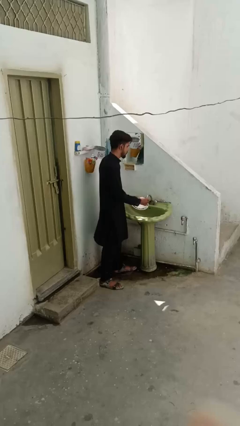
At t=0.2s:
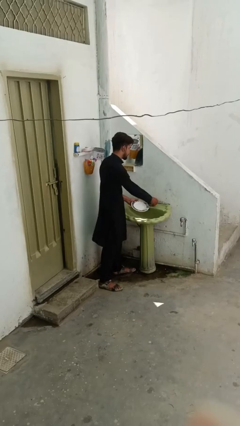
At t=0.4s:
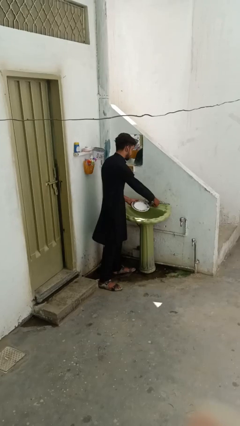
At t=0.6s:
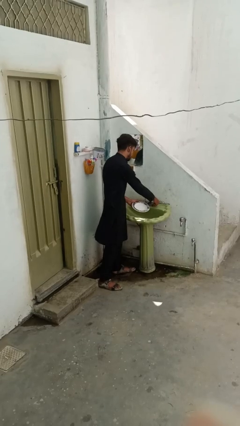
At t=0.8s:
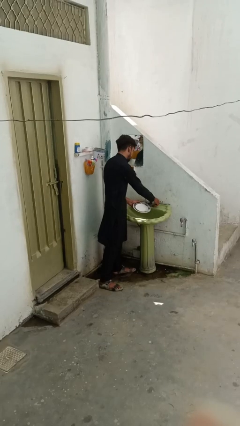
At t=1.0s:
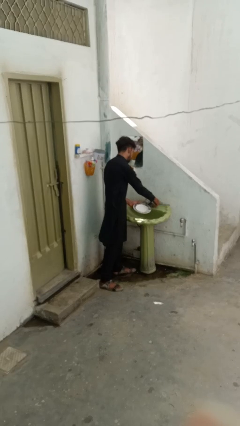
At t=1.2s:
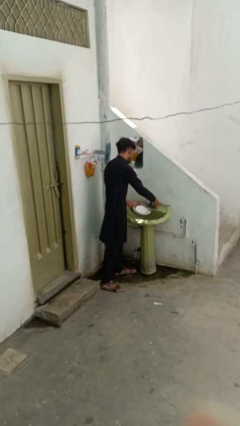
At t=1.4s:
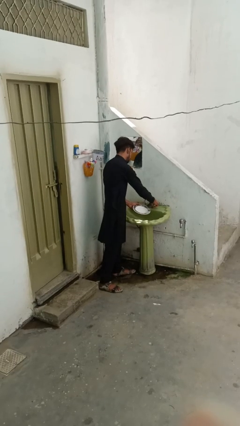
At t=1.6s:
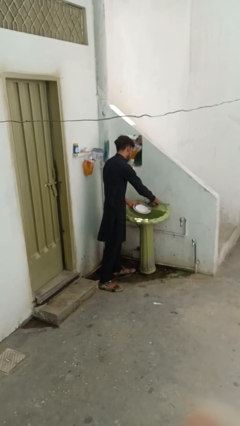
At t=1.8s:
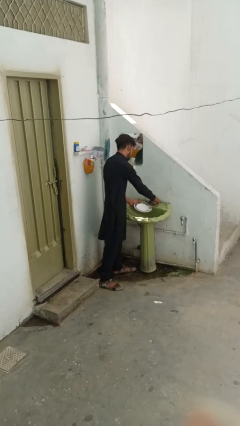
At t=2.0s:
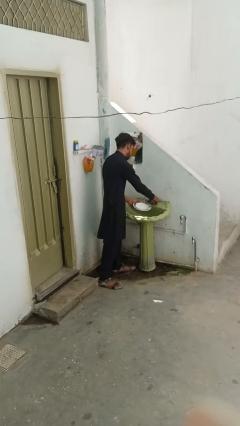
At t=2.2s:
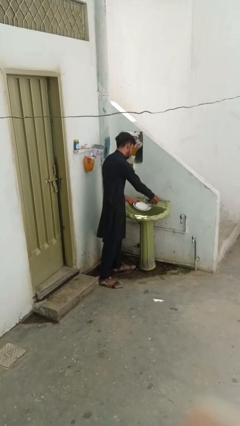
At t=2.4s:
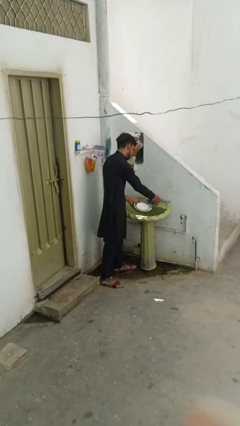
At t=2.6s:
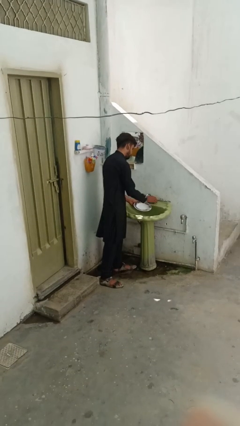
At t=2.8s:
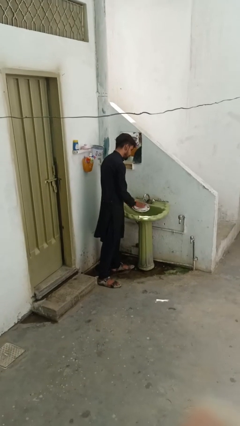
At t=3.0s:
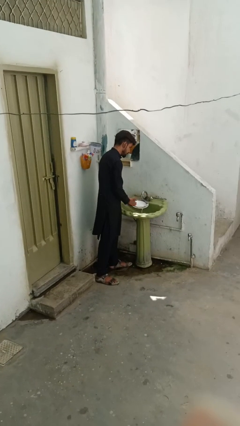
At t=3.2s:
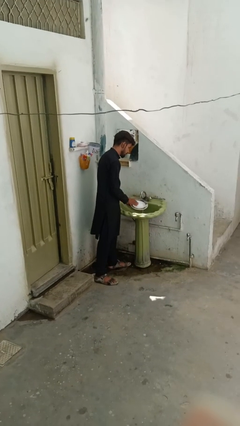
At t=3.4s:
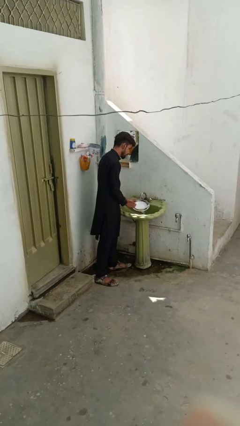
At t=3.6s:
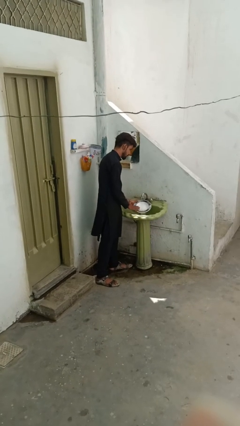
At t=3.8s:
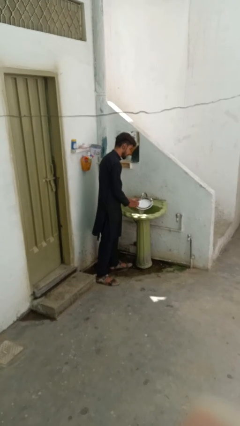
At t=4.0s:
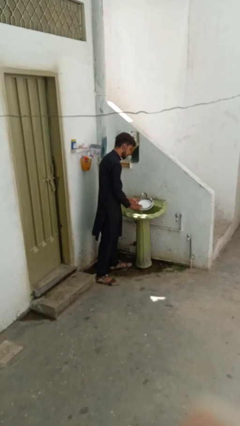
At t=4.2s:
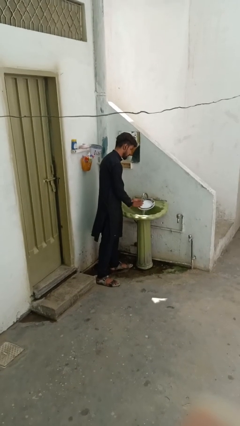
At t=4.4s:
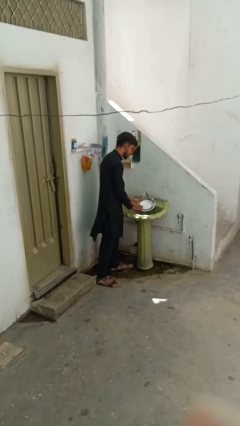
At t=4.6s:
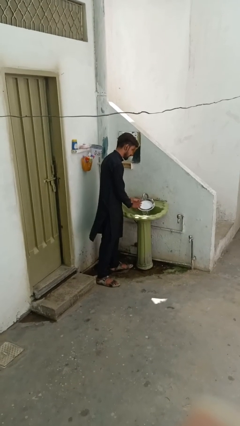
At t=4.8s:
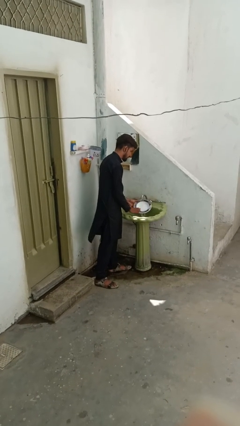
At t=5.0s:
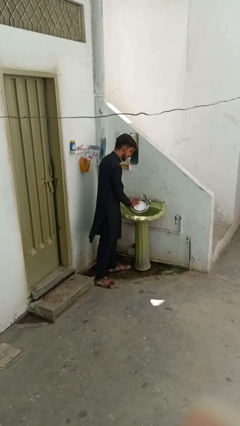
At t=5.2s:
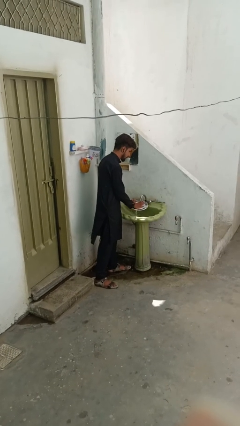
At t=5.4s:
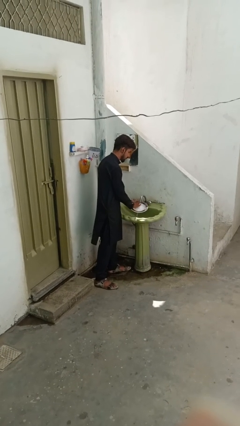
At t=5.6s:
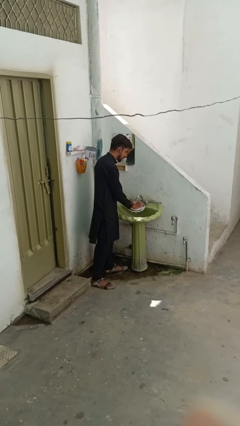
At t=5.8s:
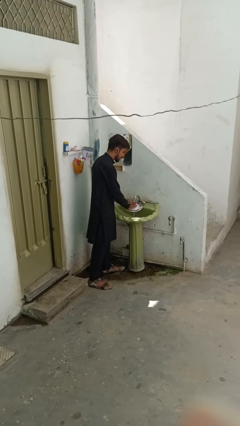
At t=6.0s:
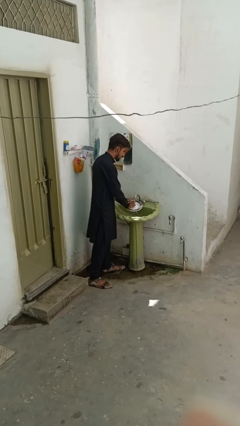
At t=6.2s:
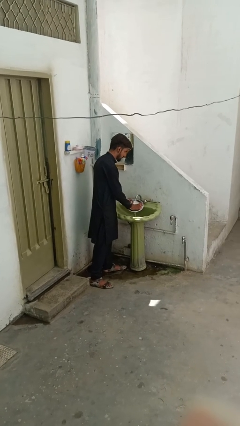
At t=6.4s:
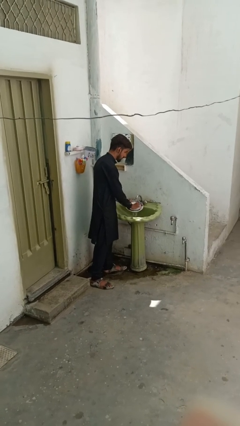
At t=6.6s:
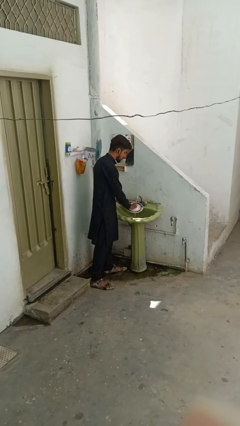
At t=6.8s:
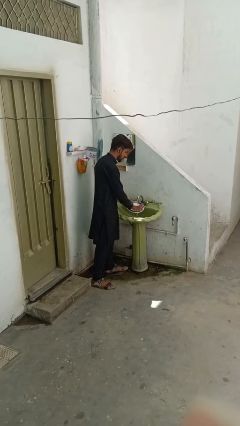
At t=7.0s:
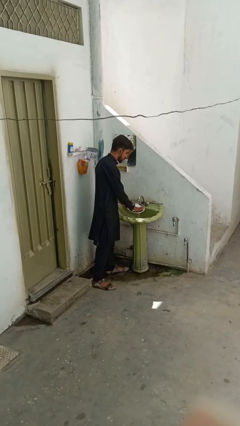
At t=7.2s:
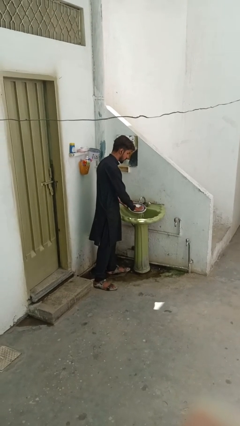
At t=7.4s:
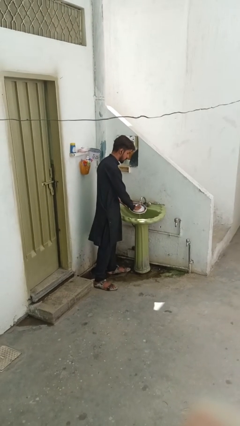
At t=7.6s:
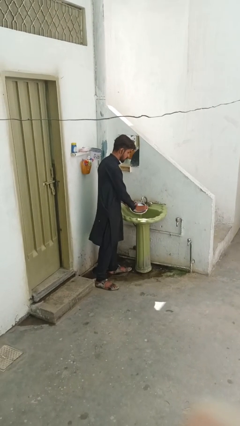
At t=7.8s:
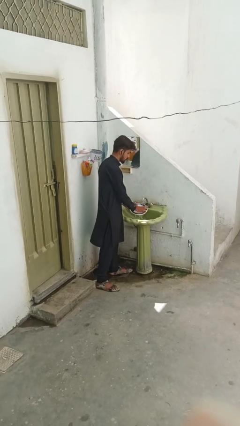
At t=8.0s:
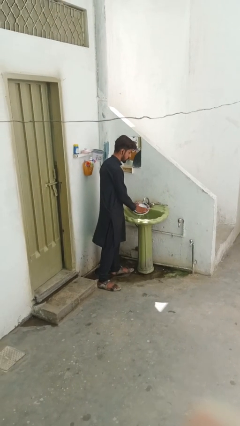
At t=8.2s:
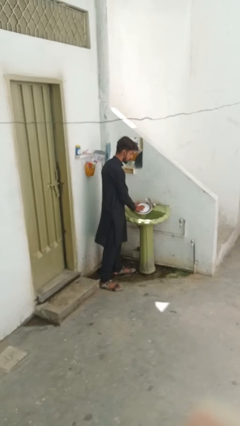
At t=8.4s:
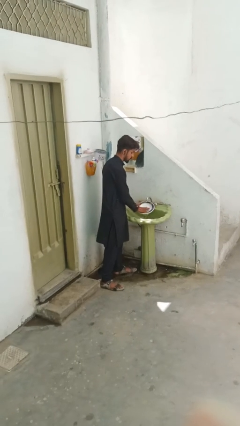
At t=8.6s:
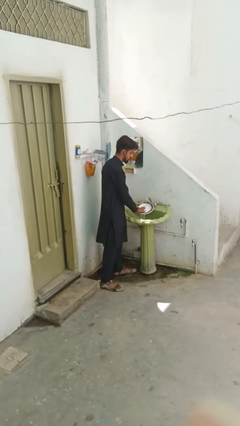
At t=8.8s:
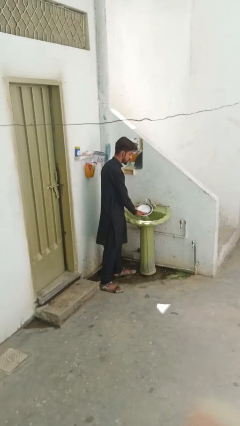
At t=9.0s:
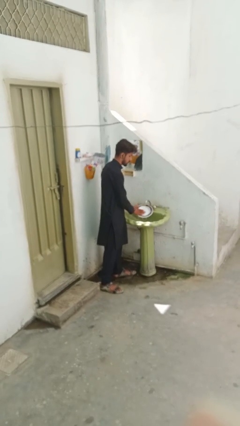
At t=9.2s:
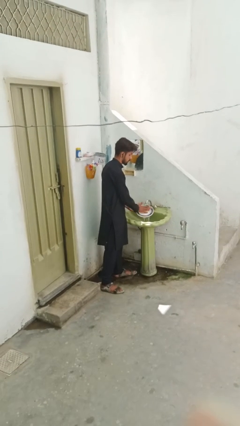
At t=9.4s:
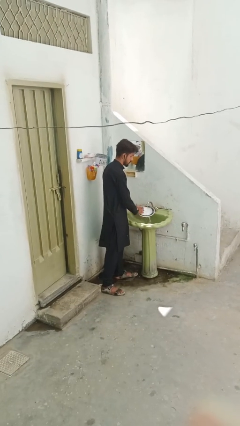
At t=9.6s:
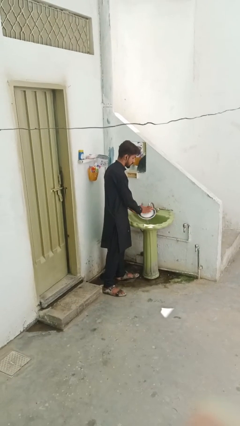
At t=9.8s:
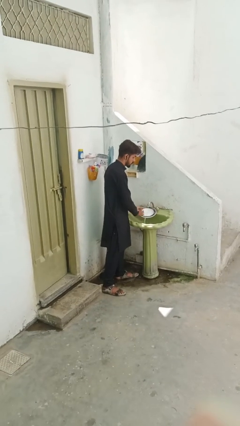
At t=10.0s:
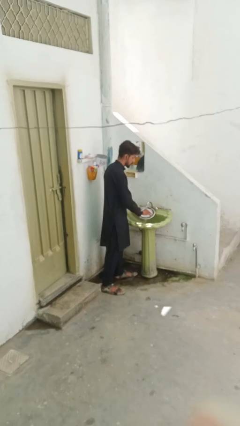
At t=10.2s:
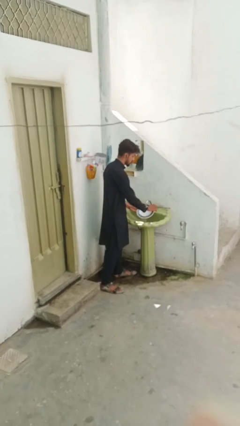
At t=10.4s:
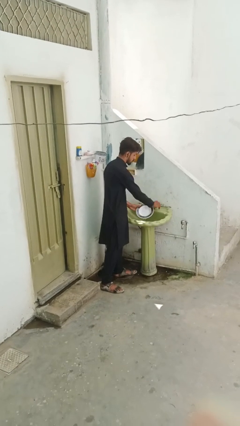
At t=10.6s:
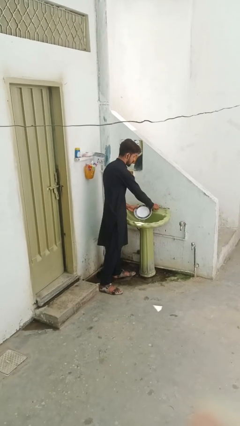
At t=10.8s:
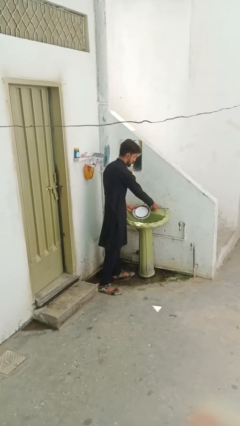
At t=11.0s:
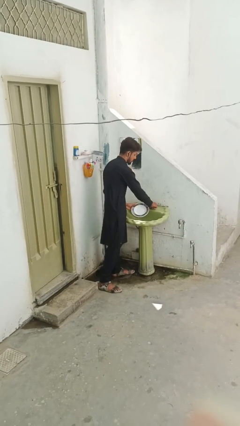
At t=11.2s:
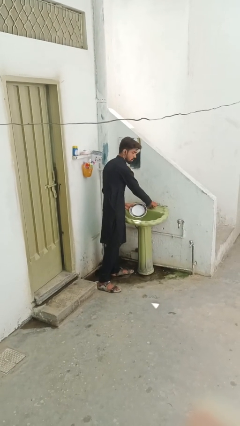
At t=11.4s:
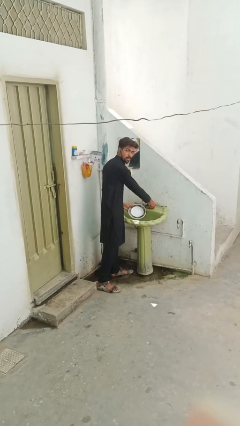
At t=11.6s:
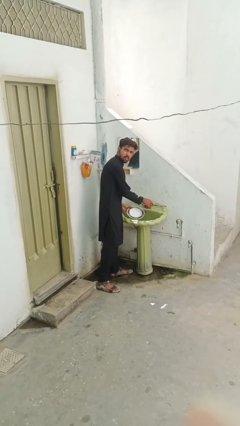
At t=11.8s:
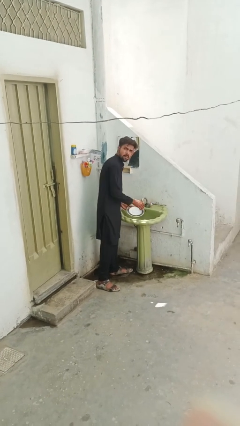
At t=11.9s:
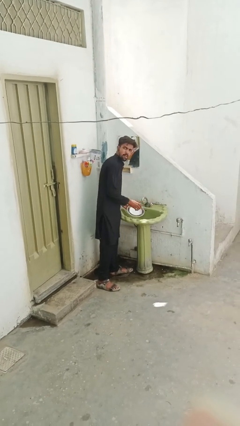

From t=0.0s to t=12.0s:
person washes dish

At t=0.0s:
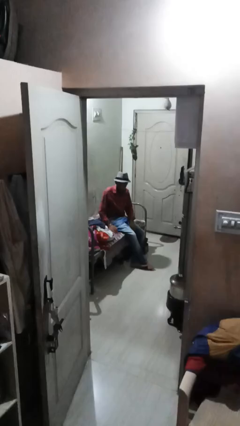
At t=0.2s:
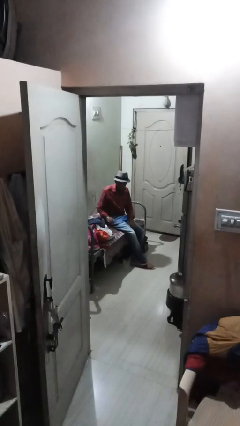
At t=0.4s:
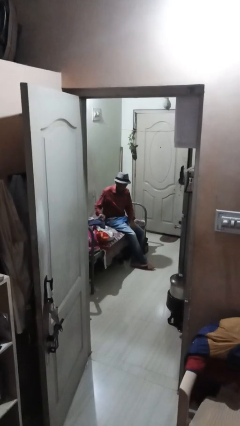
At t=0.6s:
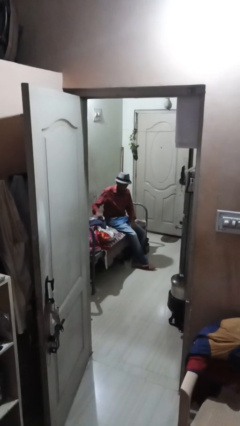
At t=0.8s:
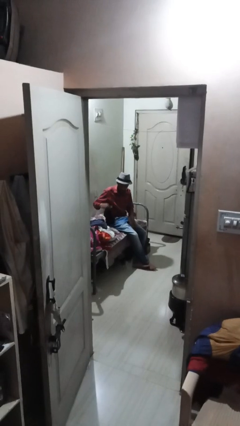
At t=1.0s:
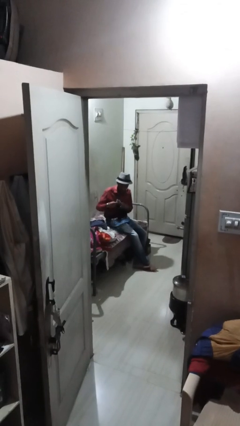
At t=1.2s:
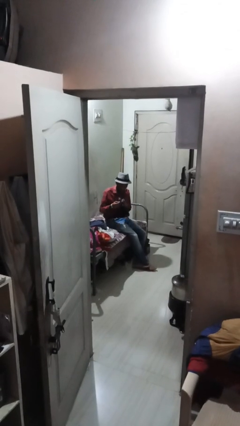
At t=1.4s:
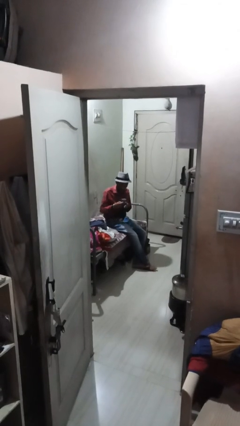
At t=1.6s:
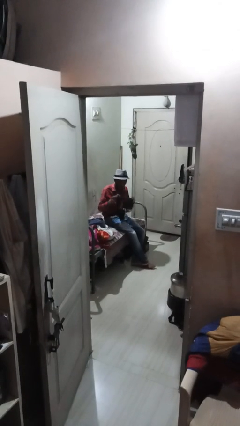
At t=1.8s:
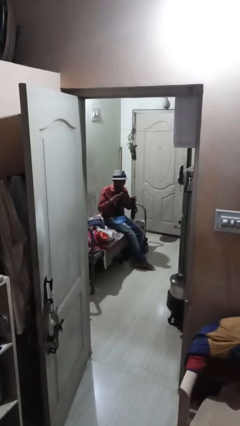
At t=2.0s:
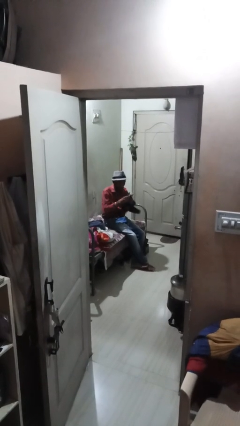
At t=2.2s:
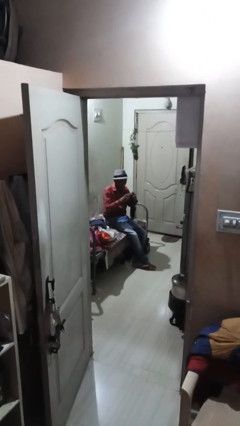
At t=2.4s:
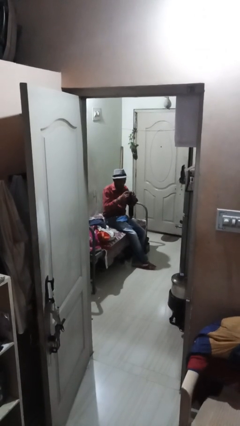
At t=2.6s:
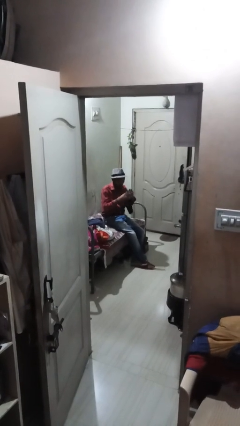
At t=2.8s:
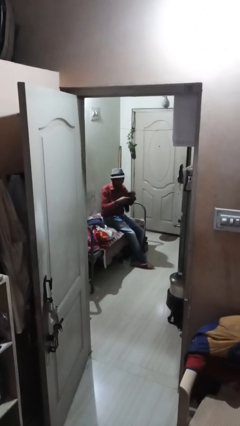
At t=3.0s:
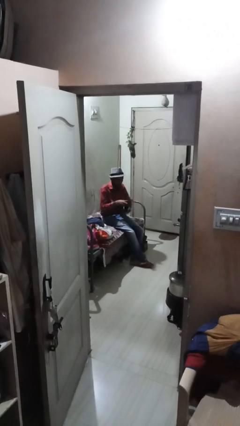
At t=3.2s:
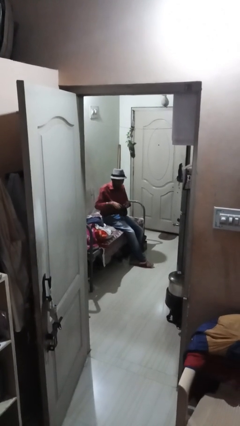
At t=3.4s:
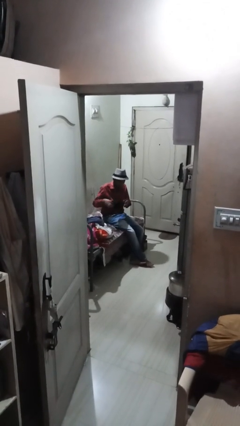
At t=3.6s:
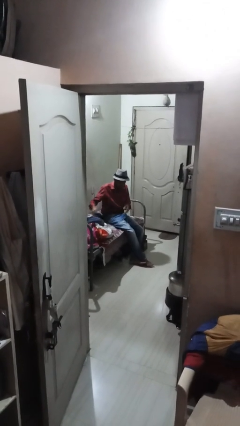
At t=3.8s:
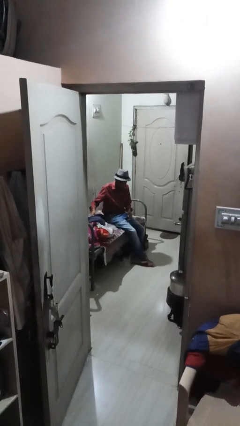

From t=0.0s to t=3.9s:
person folds socks

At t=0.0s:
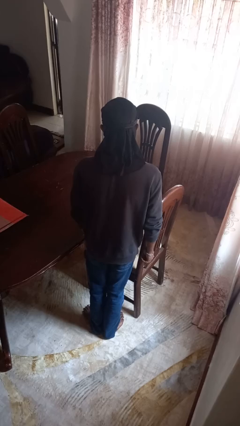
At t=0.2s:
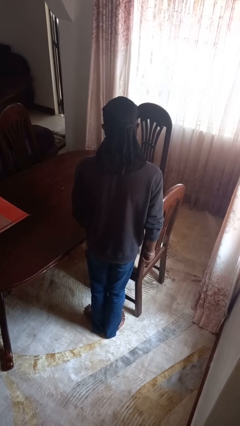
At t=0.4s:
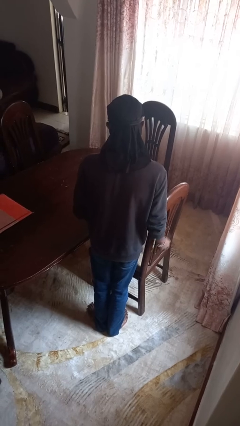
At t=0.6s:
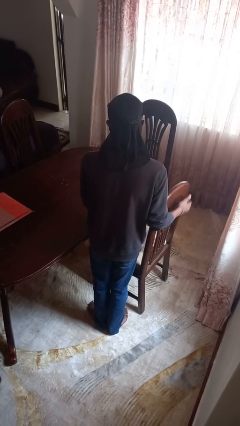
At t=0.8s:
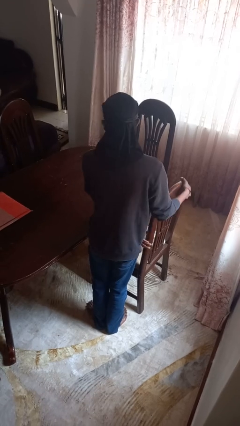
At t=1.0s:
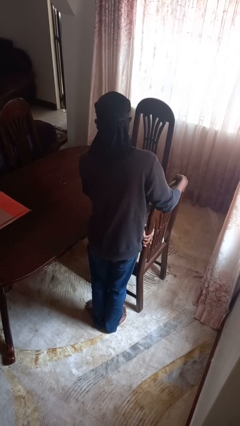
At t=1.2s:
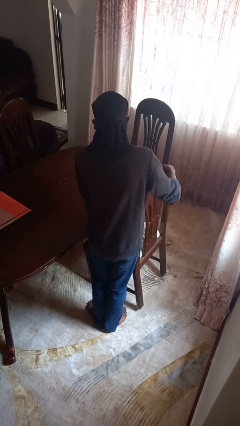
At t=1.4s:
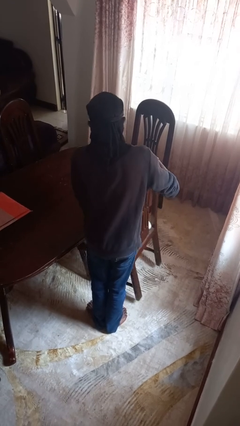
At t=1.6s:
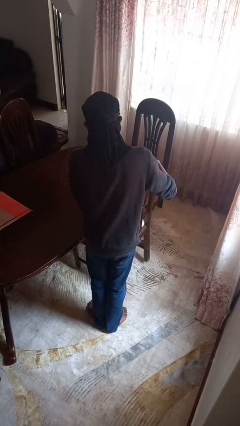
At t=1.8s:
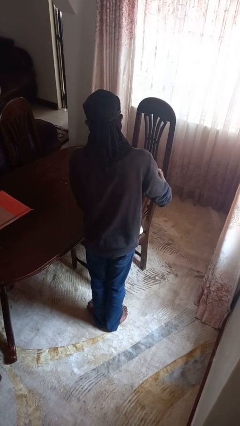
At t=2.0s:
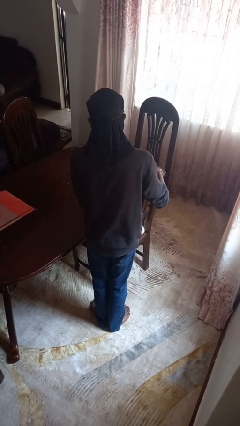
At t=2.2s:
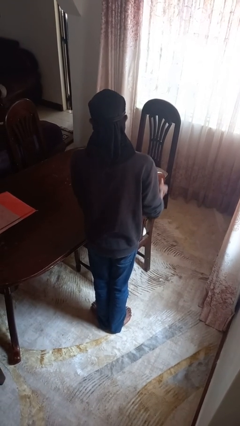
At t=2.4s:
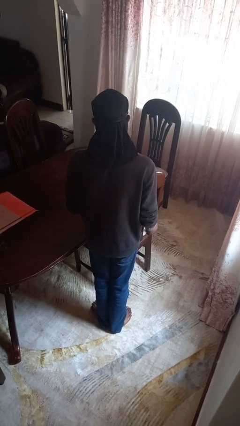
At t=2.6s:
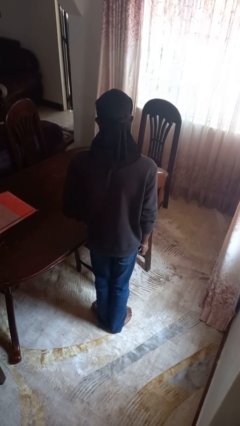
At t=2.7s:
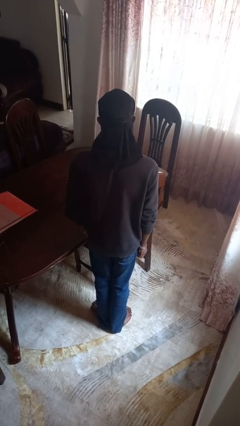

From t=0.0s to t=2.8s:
person pushes in chair
